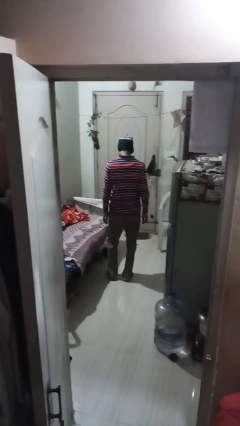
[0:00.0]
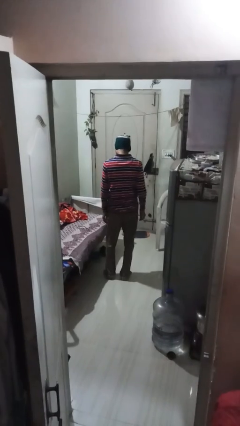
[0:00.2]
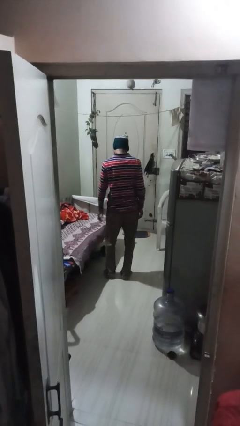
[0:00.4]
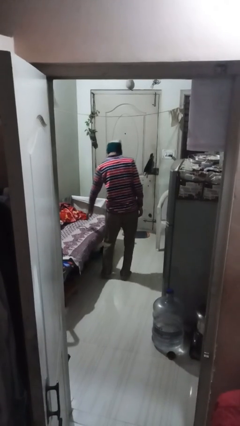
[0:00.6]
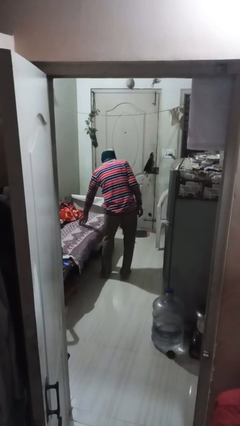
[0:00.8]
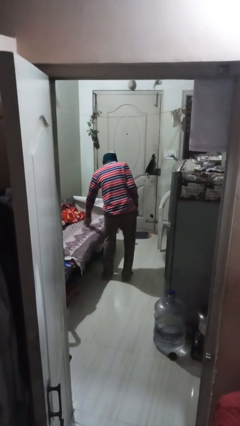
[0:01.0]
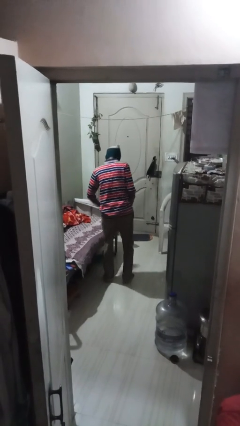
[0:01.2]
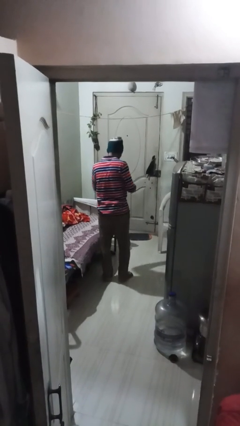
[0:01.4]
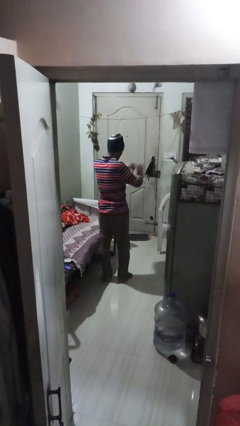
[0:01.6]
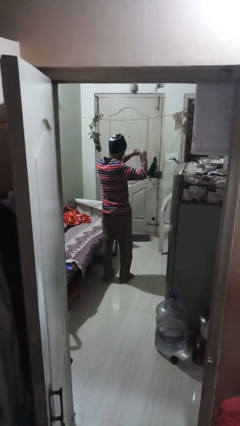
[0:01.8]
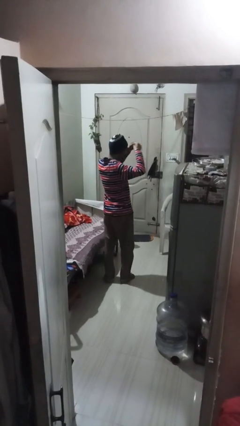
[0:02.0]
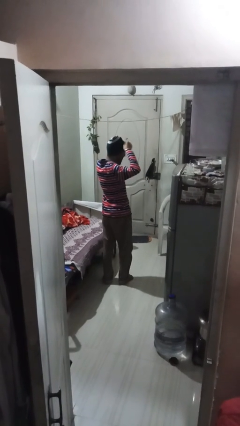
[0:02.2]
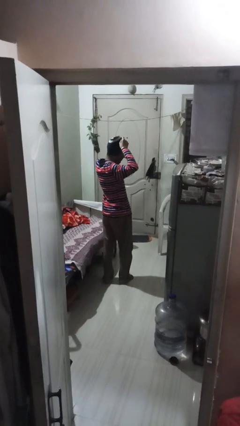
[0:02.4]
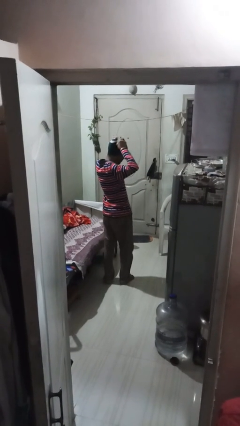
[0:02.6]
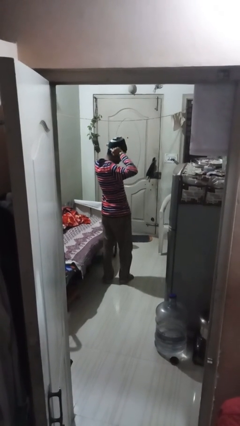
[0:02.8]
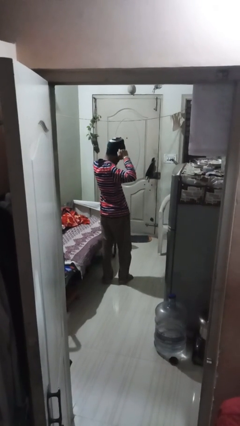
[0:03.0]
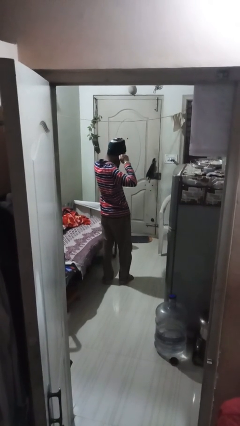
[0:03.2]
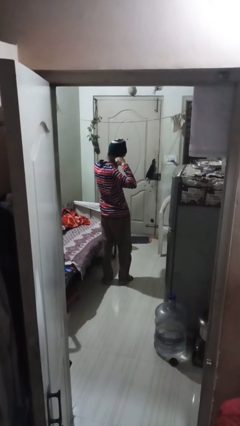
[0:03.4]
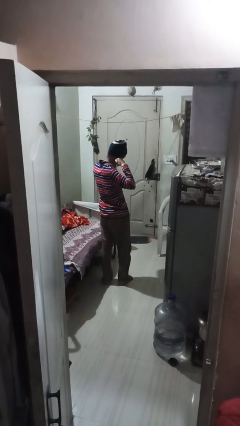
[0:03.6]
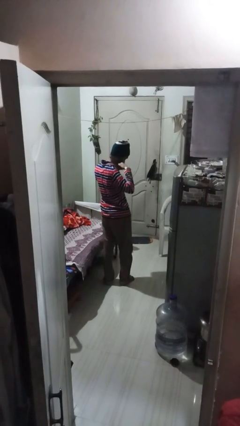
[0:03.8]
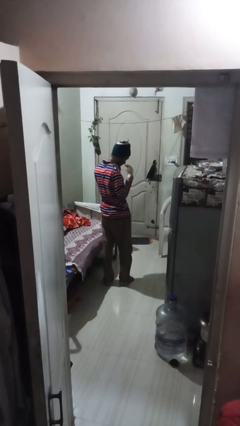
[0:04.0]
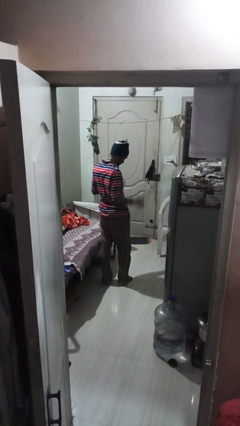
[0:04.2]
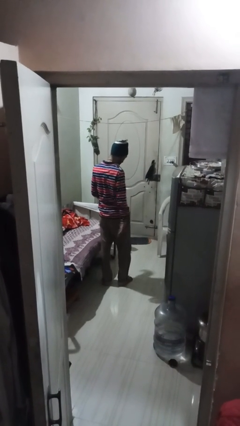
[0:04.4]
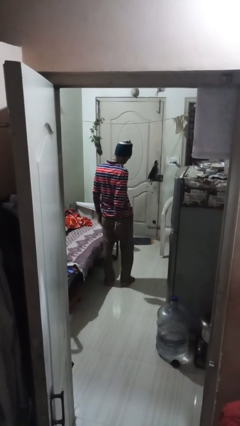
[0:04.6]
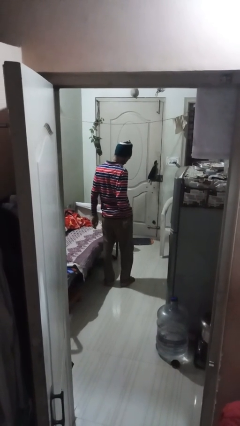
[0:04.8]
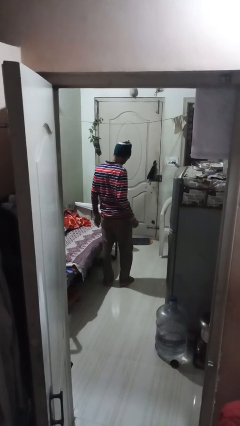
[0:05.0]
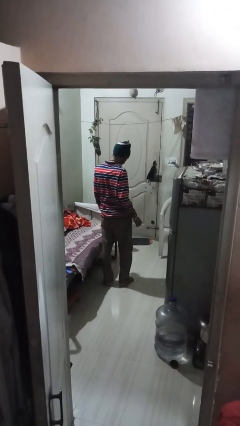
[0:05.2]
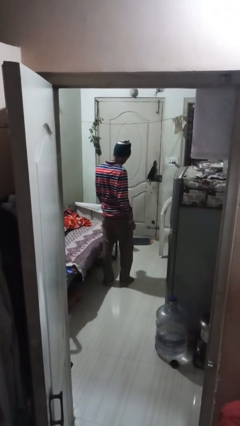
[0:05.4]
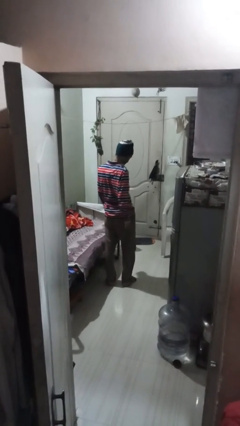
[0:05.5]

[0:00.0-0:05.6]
person puts on necklace

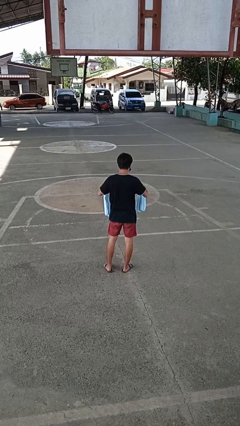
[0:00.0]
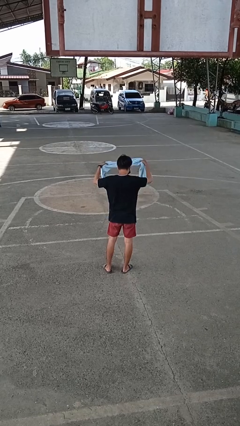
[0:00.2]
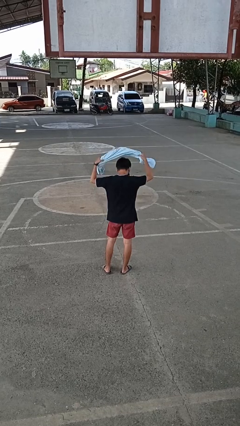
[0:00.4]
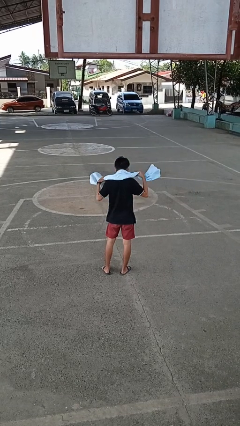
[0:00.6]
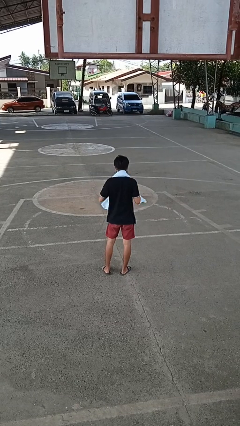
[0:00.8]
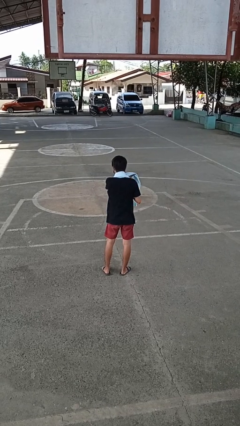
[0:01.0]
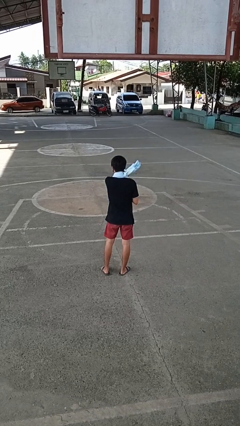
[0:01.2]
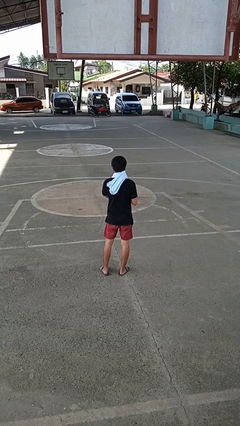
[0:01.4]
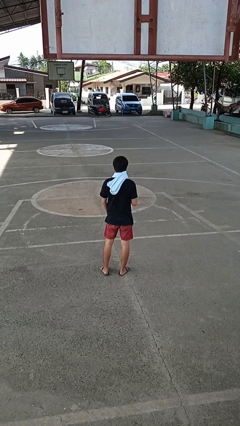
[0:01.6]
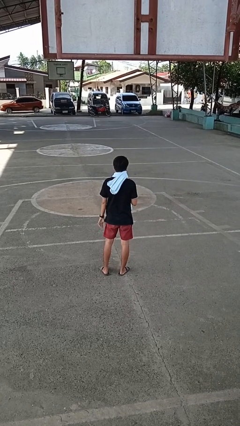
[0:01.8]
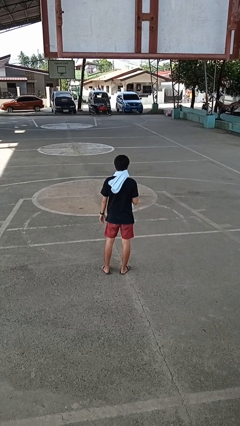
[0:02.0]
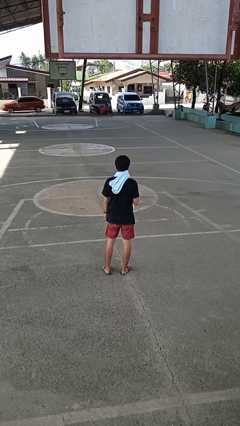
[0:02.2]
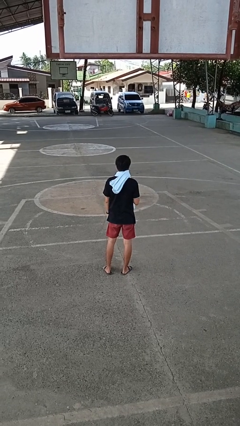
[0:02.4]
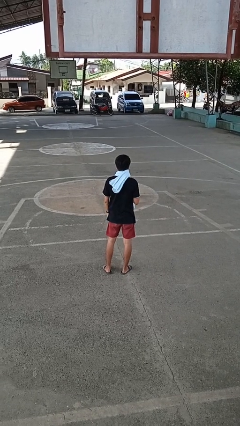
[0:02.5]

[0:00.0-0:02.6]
person puts on scarf

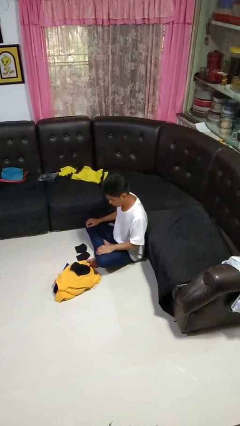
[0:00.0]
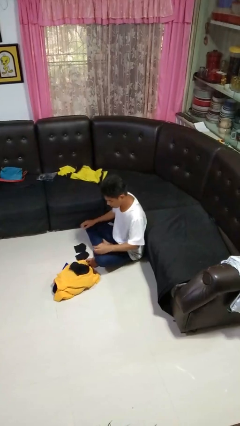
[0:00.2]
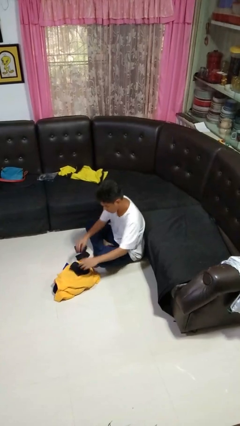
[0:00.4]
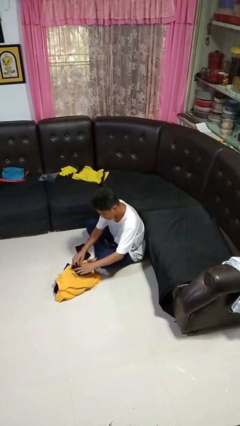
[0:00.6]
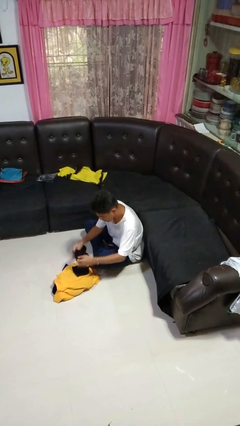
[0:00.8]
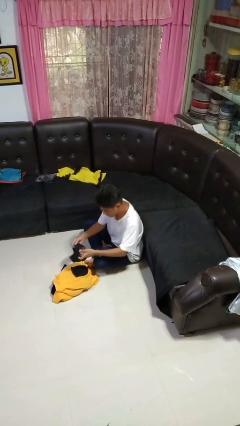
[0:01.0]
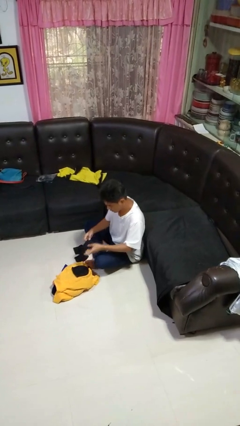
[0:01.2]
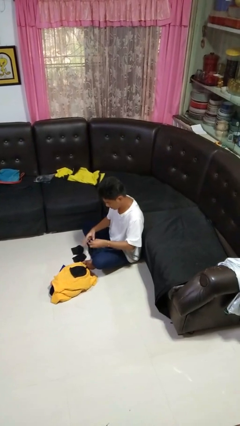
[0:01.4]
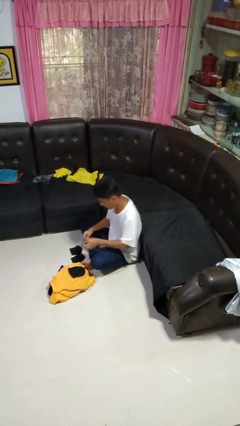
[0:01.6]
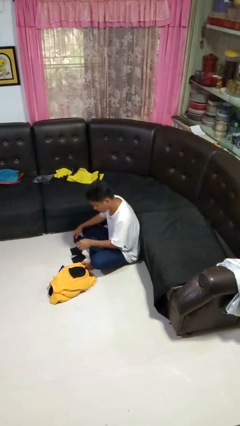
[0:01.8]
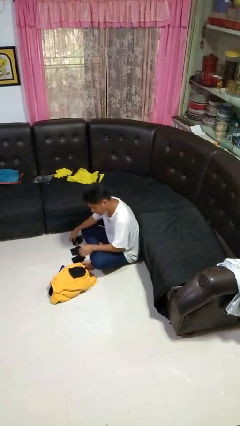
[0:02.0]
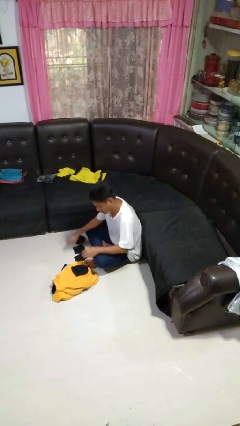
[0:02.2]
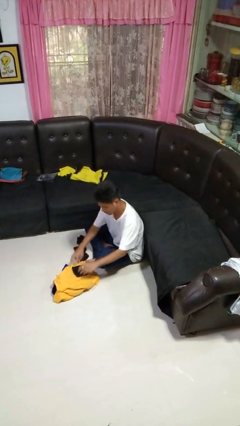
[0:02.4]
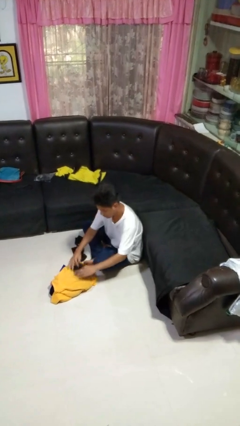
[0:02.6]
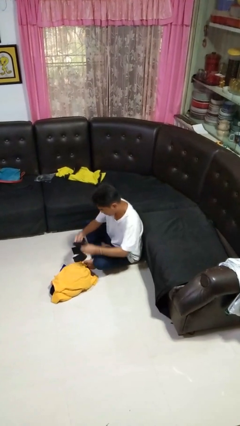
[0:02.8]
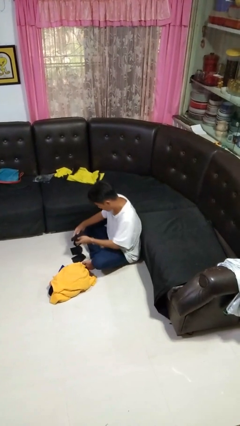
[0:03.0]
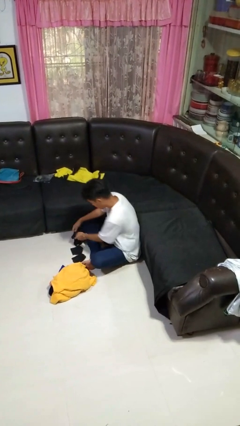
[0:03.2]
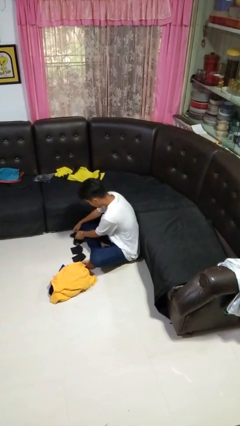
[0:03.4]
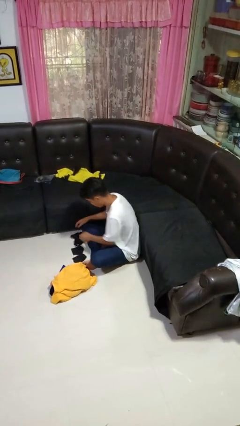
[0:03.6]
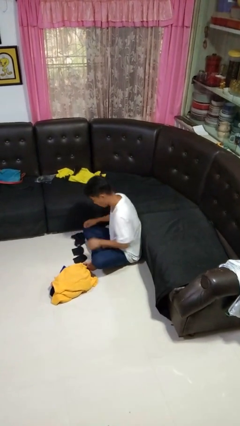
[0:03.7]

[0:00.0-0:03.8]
person folds socks

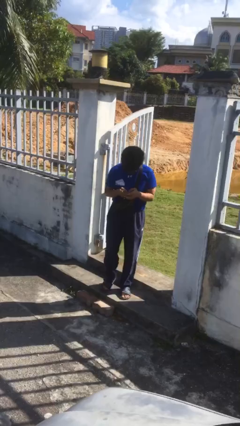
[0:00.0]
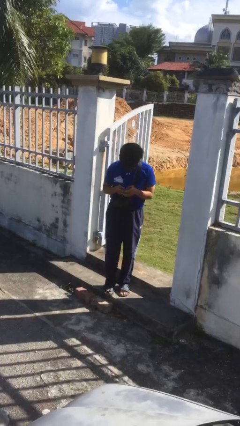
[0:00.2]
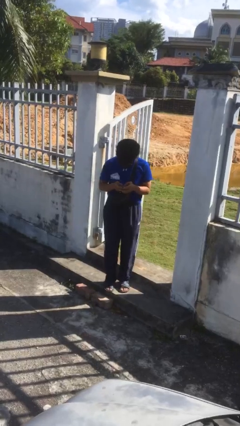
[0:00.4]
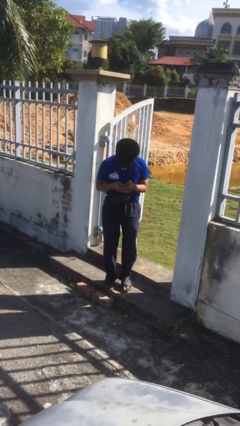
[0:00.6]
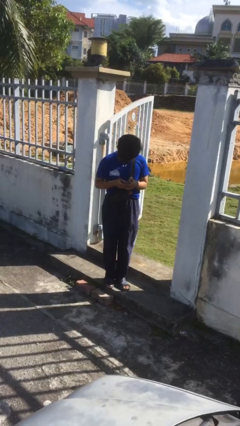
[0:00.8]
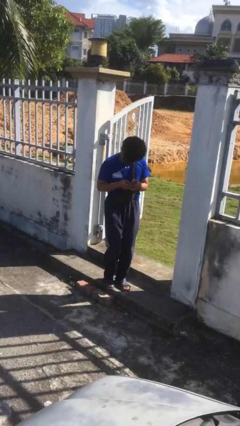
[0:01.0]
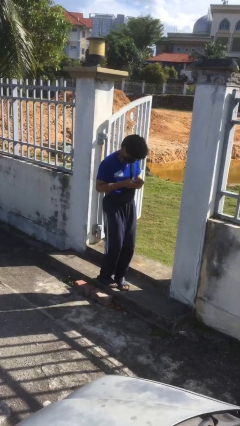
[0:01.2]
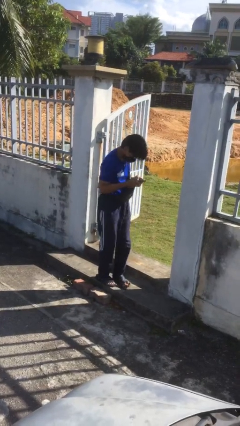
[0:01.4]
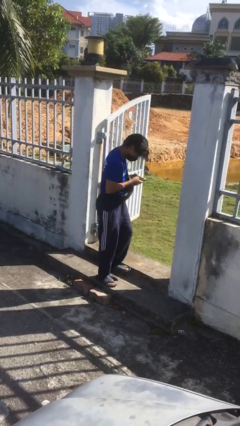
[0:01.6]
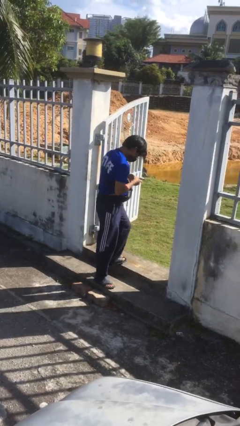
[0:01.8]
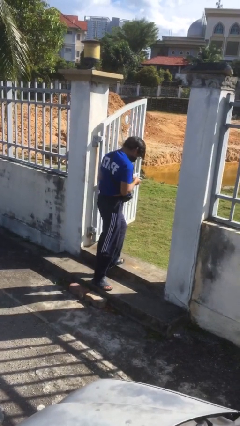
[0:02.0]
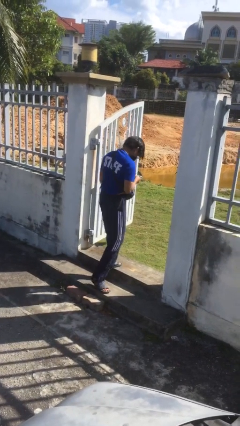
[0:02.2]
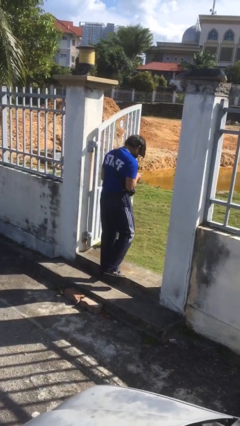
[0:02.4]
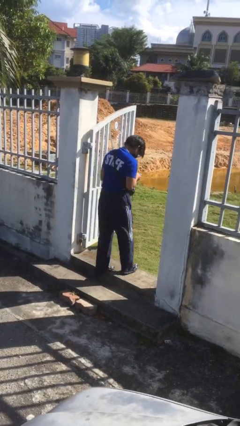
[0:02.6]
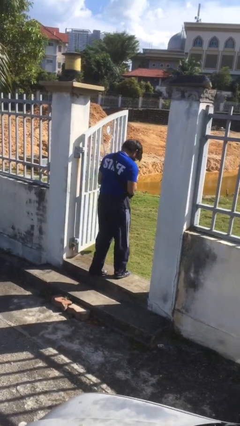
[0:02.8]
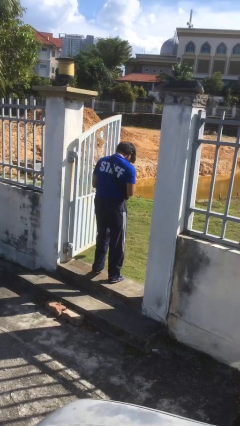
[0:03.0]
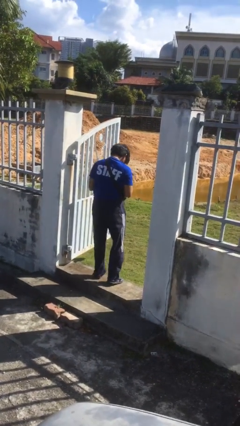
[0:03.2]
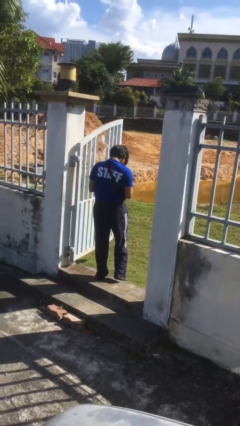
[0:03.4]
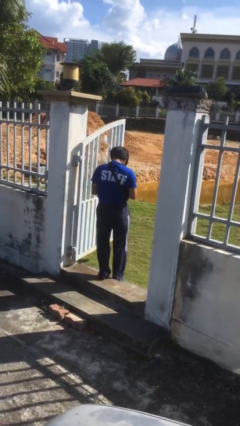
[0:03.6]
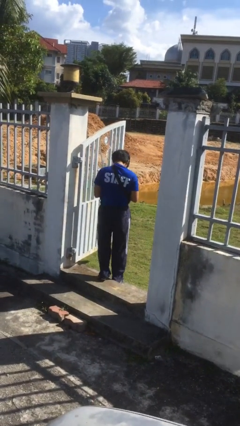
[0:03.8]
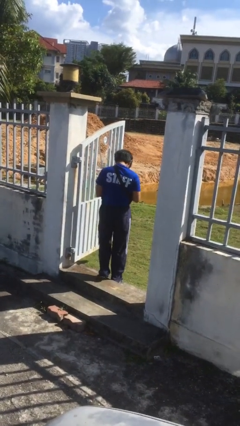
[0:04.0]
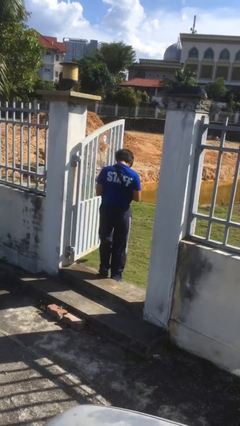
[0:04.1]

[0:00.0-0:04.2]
person exits scene through structure

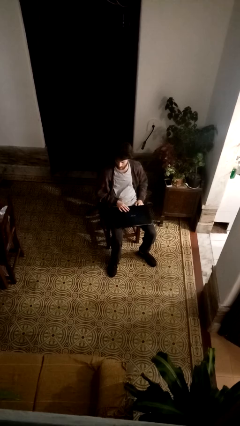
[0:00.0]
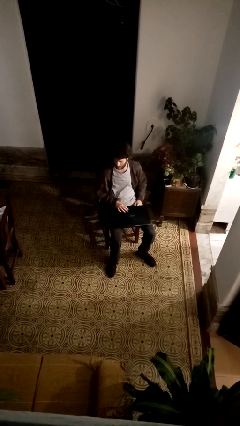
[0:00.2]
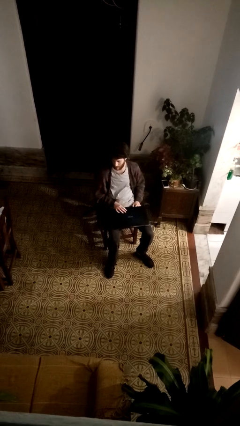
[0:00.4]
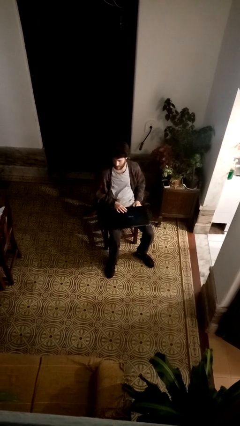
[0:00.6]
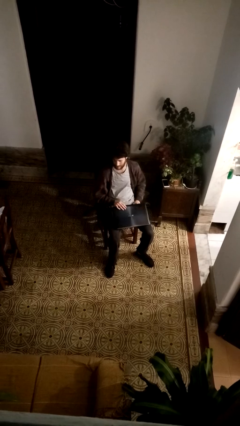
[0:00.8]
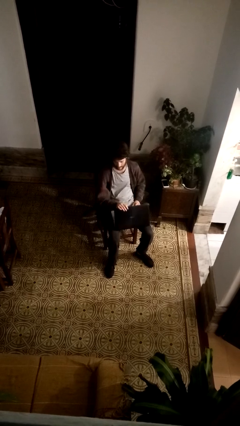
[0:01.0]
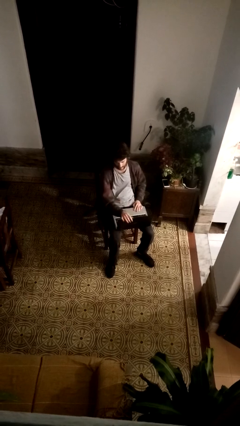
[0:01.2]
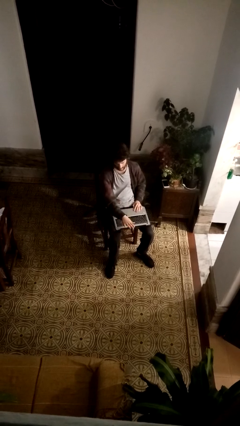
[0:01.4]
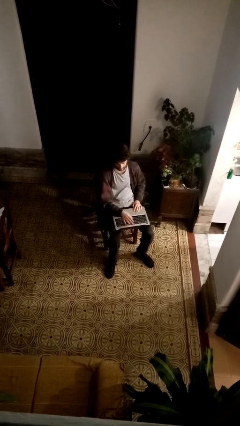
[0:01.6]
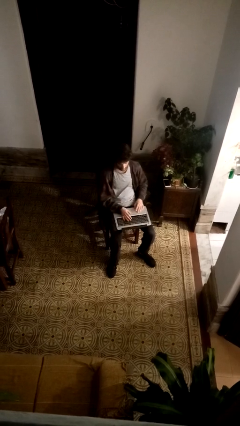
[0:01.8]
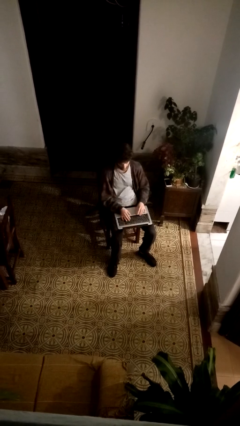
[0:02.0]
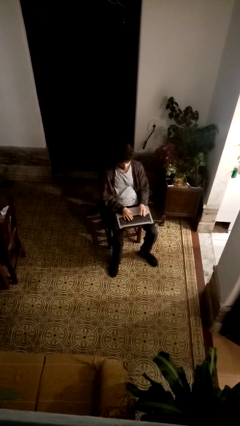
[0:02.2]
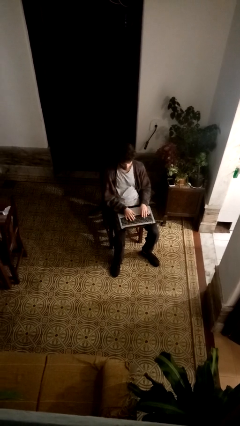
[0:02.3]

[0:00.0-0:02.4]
person opens laptop
